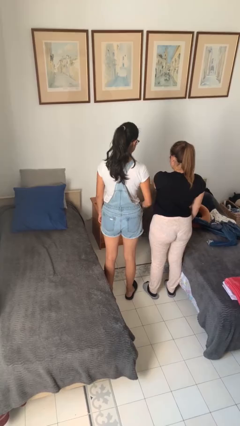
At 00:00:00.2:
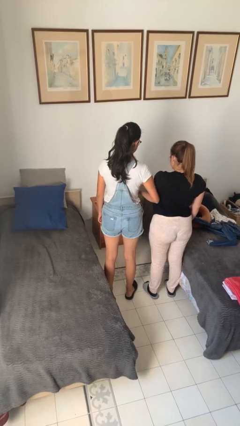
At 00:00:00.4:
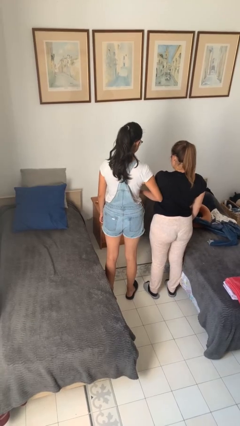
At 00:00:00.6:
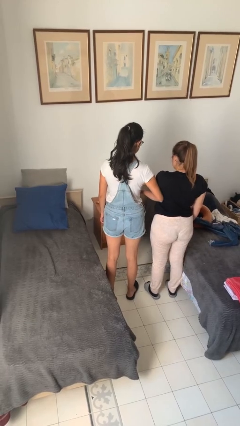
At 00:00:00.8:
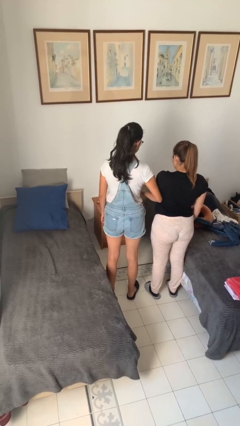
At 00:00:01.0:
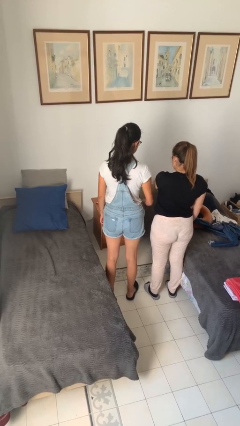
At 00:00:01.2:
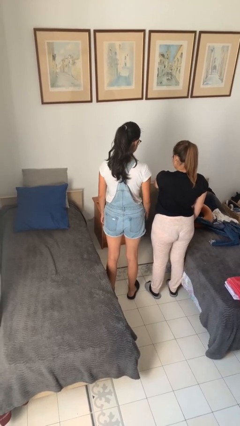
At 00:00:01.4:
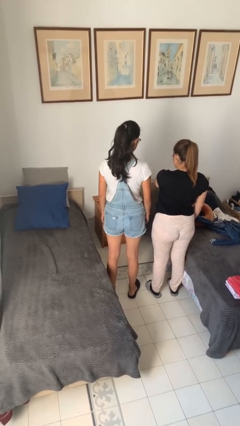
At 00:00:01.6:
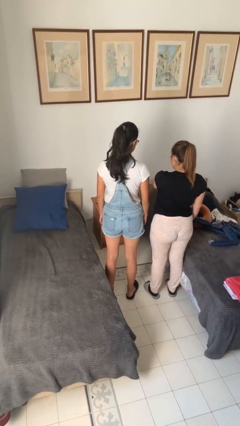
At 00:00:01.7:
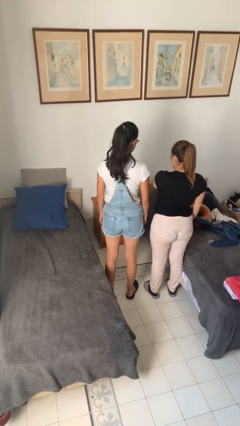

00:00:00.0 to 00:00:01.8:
person nudges person with elbow

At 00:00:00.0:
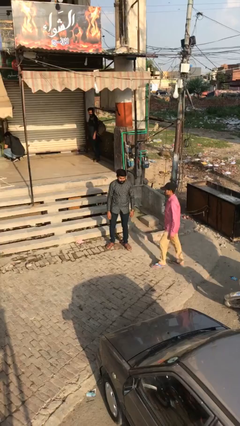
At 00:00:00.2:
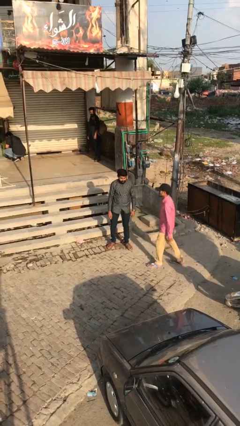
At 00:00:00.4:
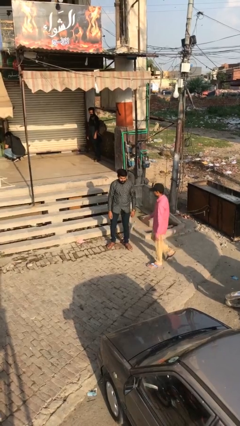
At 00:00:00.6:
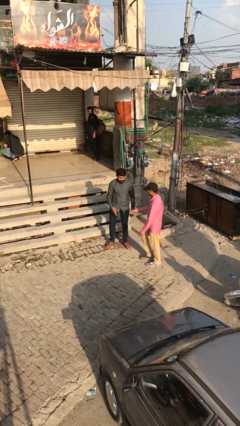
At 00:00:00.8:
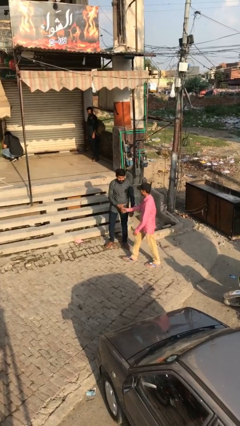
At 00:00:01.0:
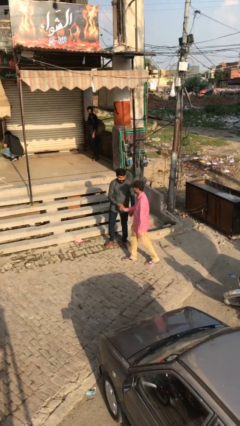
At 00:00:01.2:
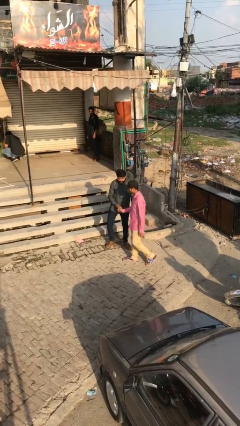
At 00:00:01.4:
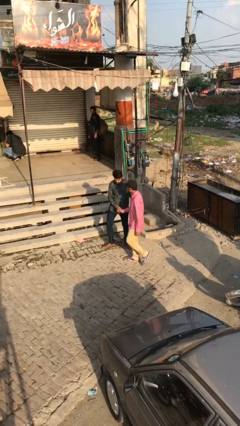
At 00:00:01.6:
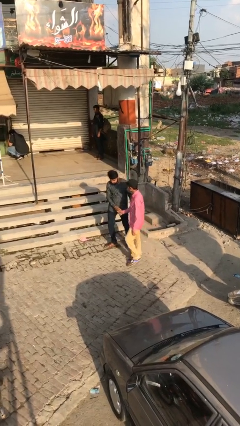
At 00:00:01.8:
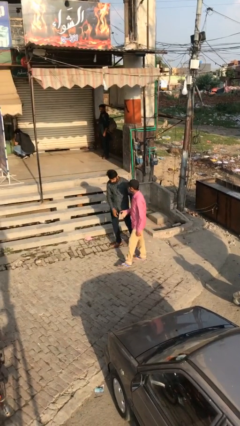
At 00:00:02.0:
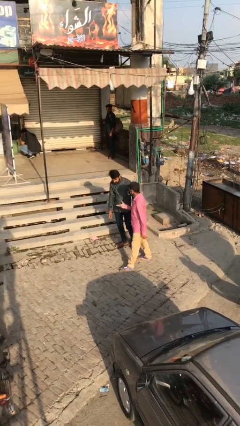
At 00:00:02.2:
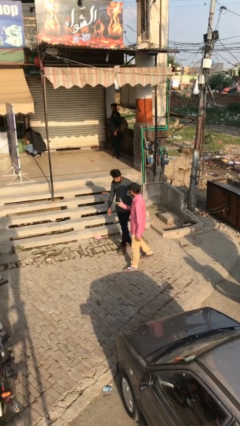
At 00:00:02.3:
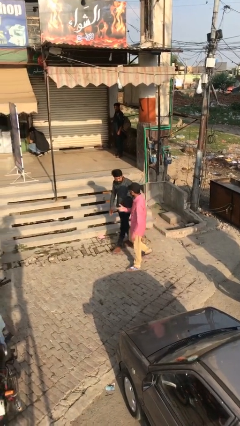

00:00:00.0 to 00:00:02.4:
person shakes hand

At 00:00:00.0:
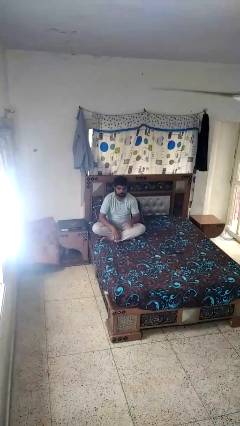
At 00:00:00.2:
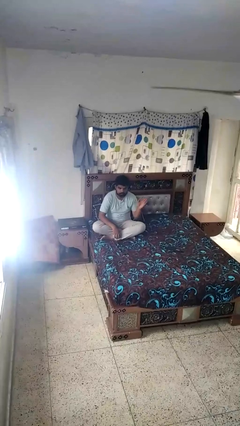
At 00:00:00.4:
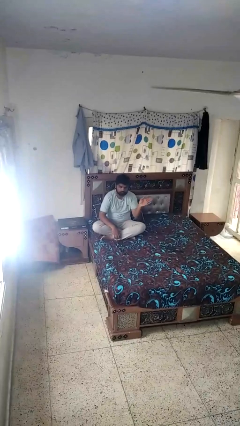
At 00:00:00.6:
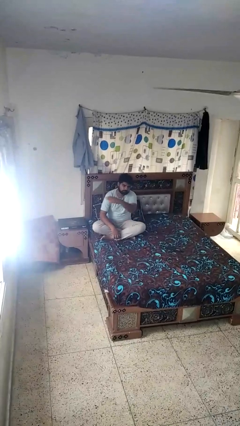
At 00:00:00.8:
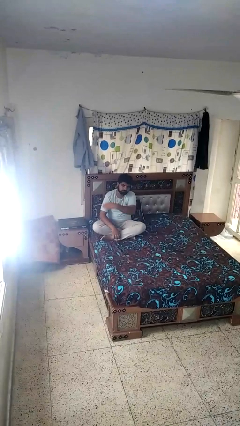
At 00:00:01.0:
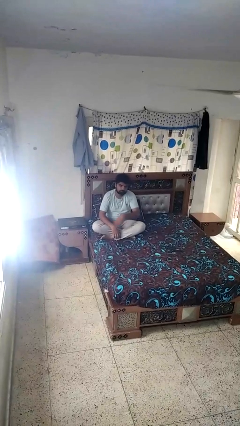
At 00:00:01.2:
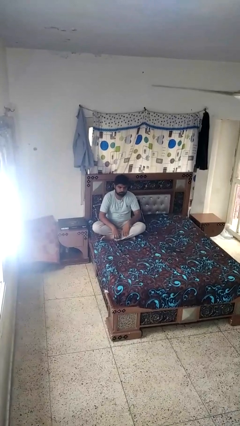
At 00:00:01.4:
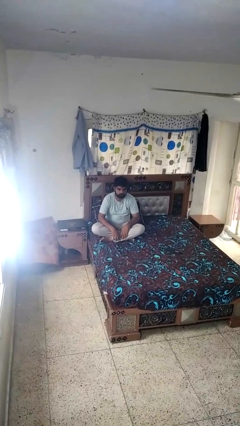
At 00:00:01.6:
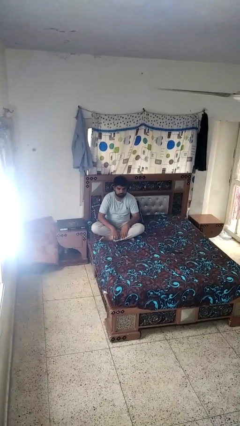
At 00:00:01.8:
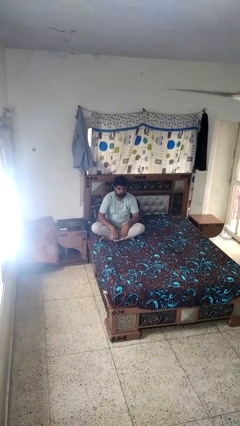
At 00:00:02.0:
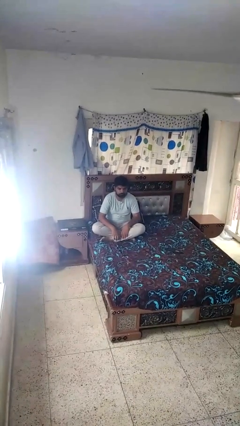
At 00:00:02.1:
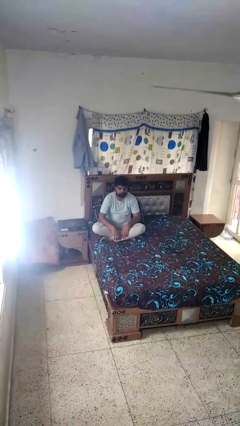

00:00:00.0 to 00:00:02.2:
person gestures swipe right

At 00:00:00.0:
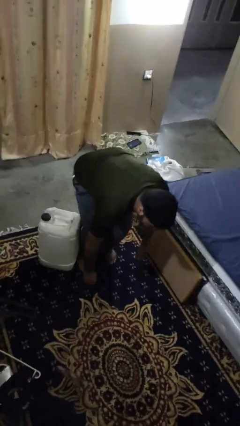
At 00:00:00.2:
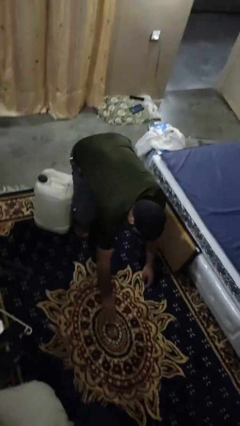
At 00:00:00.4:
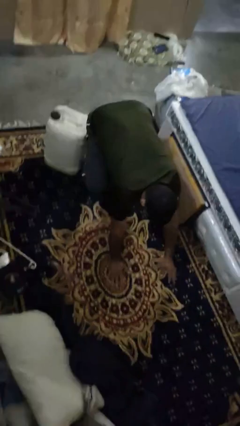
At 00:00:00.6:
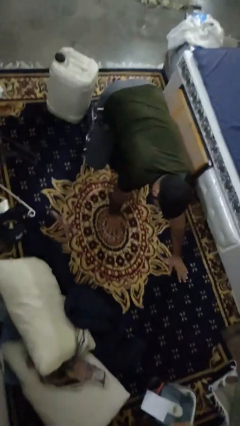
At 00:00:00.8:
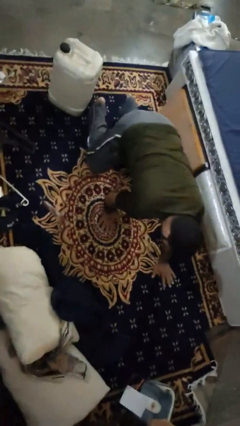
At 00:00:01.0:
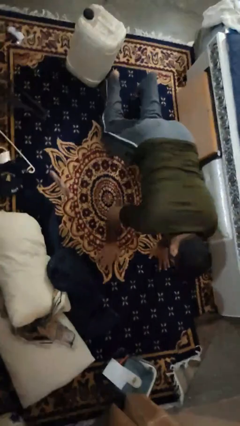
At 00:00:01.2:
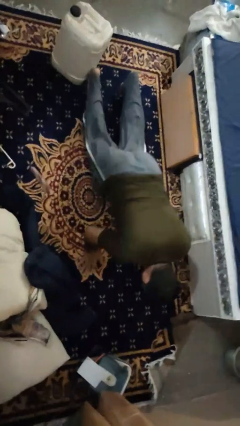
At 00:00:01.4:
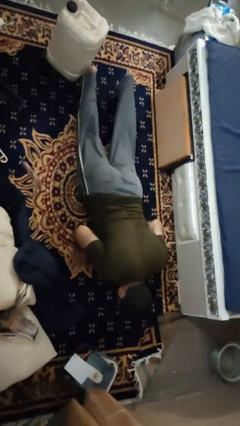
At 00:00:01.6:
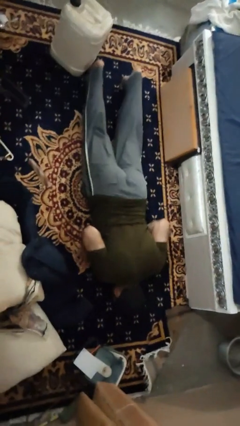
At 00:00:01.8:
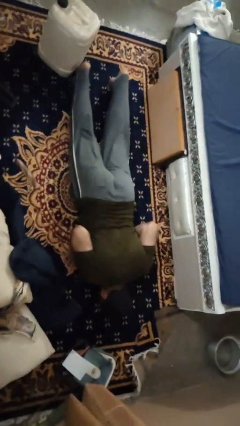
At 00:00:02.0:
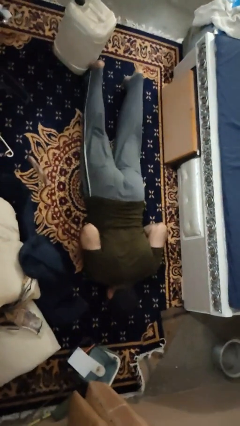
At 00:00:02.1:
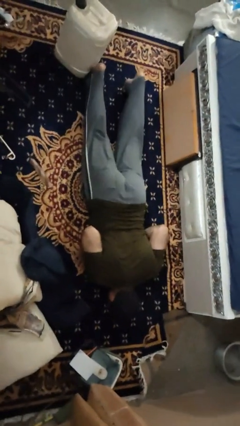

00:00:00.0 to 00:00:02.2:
person lies down on floor

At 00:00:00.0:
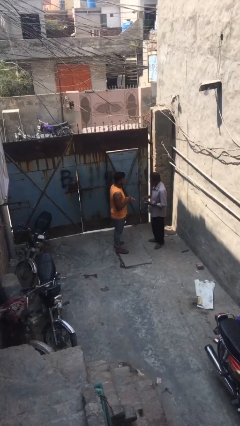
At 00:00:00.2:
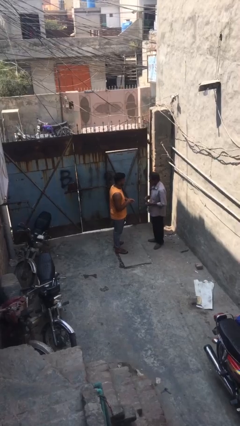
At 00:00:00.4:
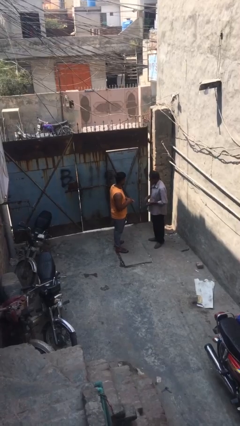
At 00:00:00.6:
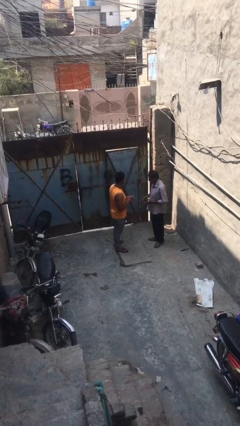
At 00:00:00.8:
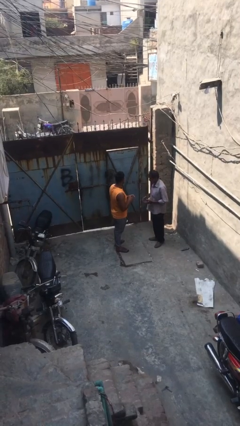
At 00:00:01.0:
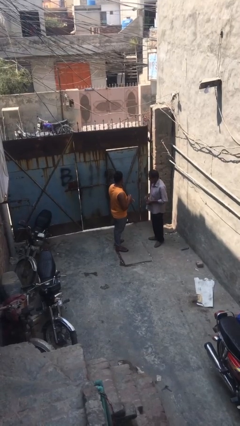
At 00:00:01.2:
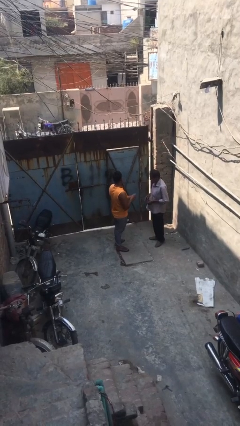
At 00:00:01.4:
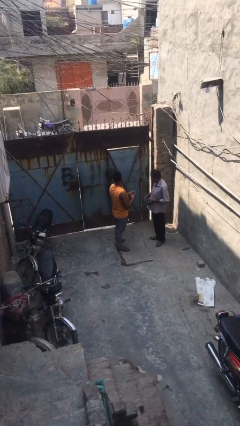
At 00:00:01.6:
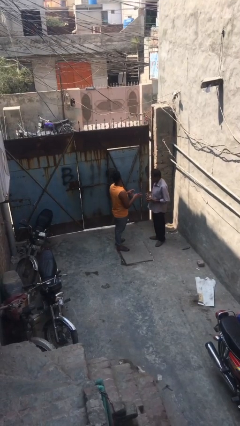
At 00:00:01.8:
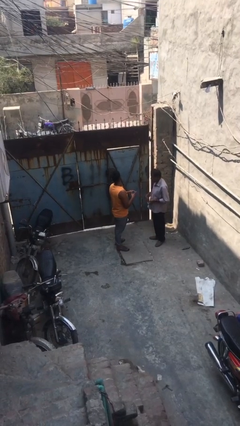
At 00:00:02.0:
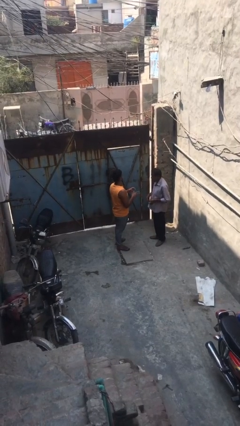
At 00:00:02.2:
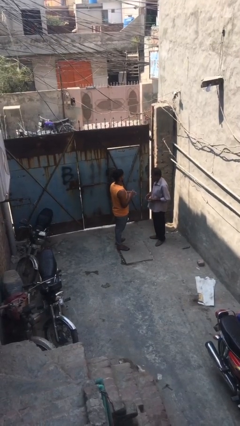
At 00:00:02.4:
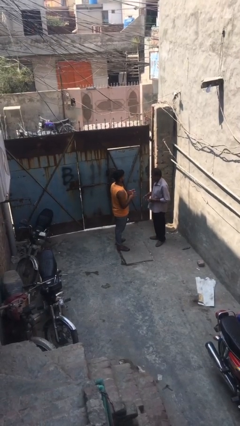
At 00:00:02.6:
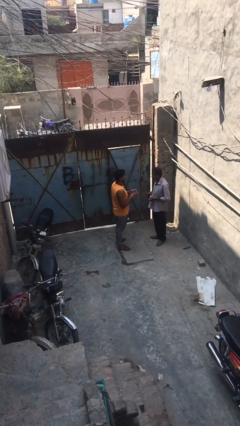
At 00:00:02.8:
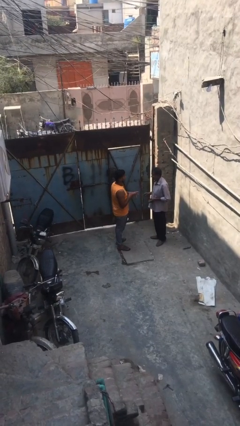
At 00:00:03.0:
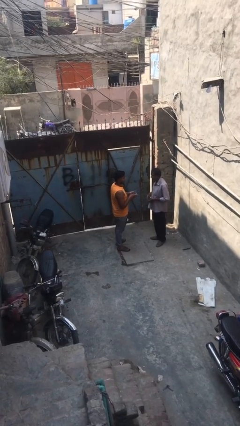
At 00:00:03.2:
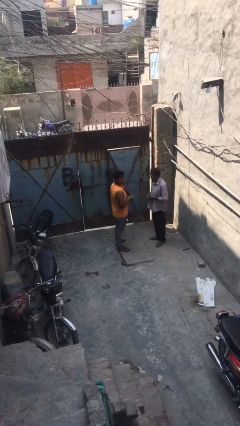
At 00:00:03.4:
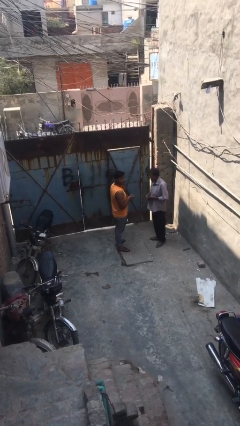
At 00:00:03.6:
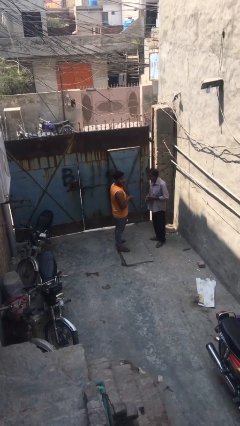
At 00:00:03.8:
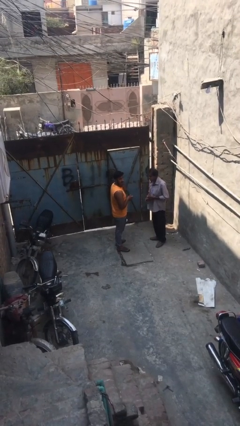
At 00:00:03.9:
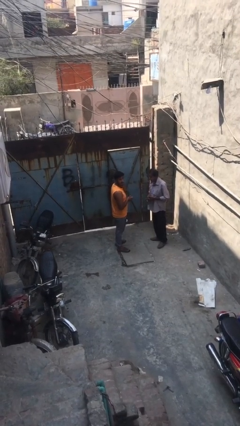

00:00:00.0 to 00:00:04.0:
person talks to person

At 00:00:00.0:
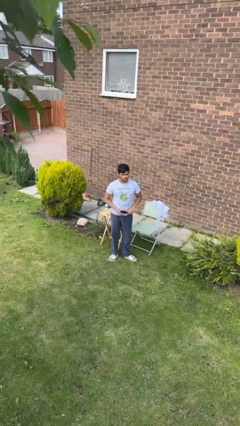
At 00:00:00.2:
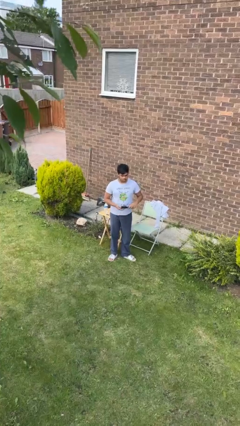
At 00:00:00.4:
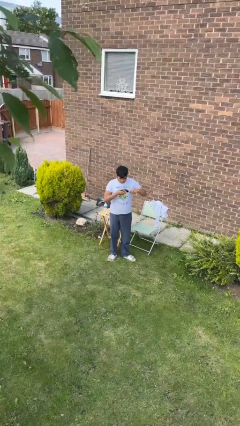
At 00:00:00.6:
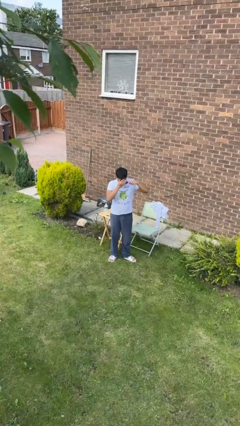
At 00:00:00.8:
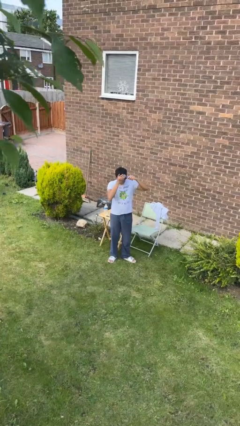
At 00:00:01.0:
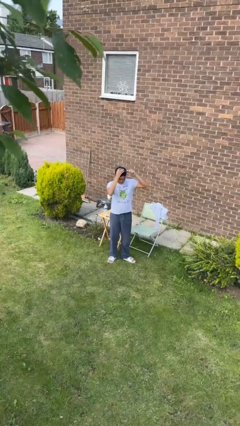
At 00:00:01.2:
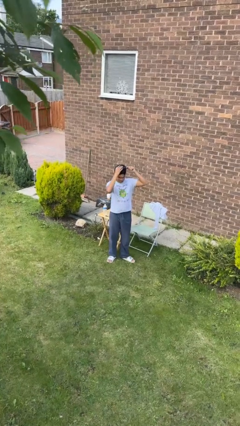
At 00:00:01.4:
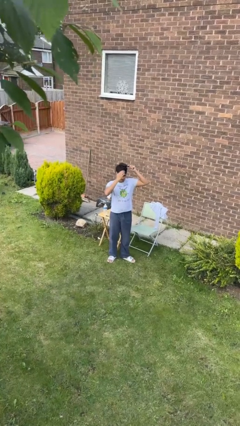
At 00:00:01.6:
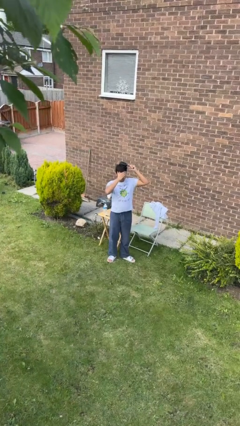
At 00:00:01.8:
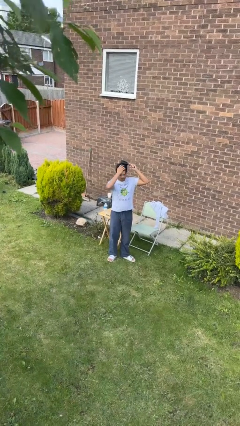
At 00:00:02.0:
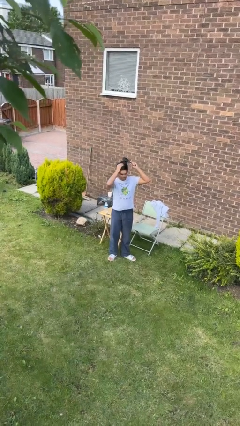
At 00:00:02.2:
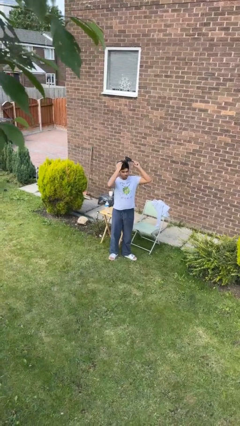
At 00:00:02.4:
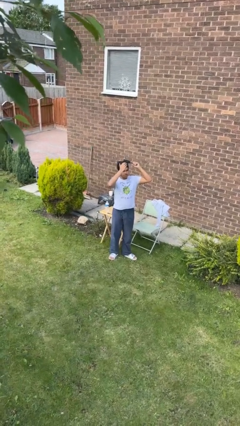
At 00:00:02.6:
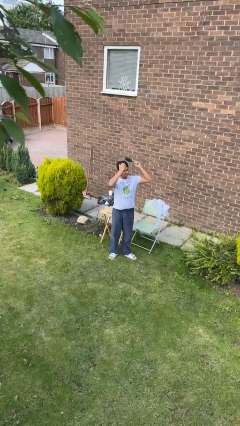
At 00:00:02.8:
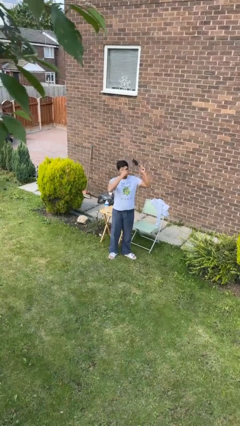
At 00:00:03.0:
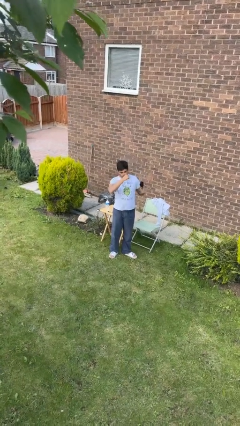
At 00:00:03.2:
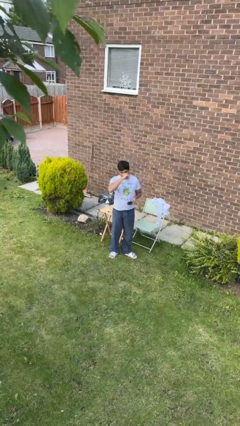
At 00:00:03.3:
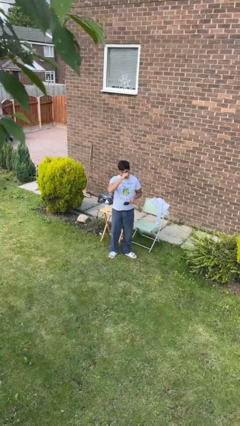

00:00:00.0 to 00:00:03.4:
person brushes hair

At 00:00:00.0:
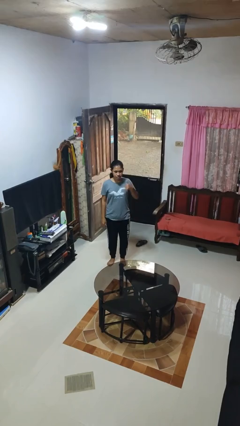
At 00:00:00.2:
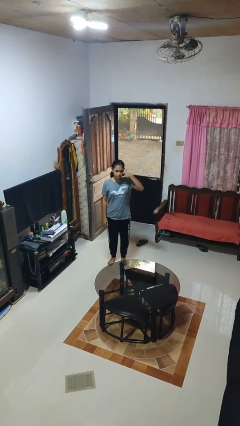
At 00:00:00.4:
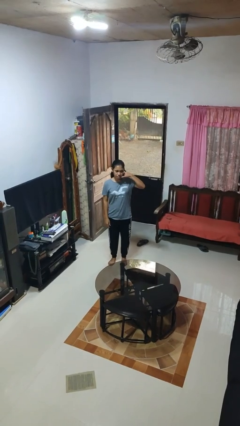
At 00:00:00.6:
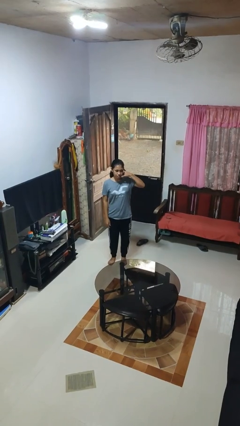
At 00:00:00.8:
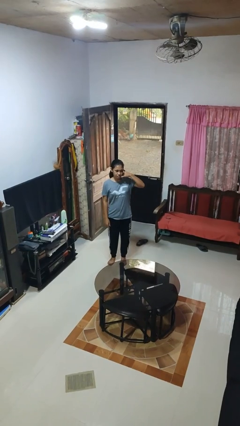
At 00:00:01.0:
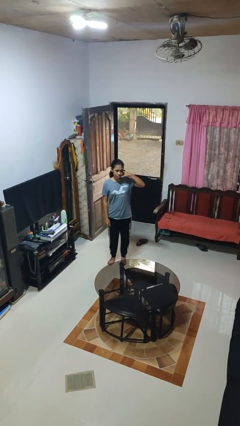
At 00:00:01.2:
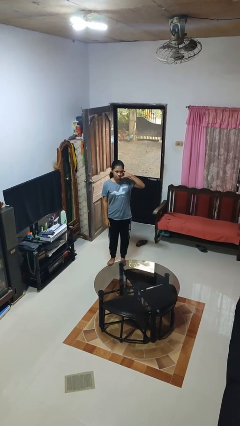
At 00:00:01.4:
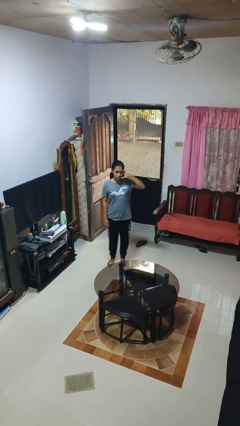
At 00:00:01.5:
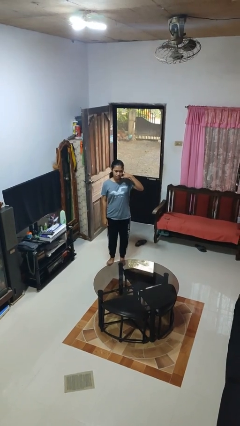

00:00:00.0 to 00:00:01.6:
person gestures call me
